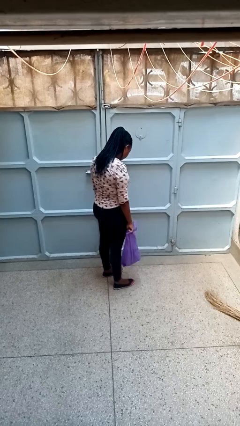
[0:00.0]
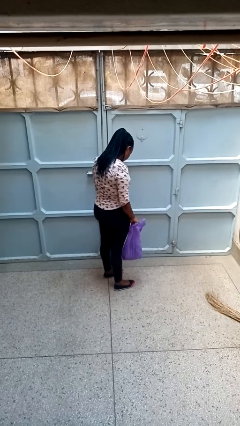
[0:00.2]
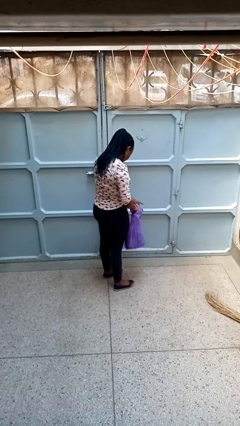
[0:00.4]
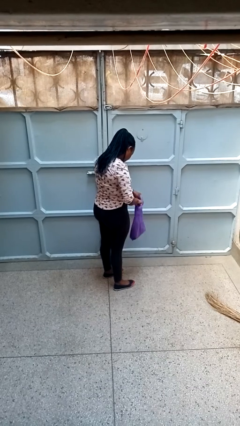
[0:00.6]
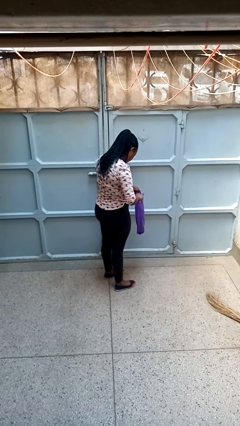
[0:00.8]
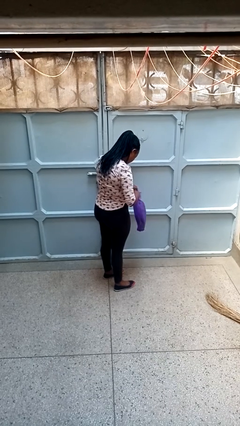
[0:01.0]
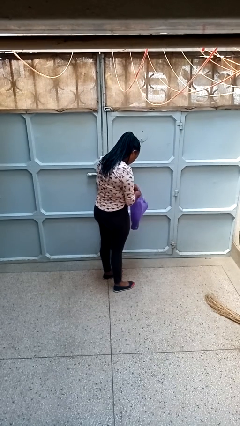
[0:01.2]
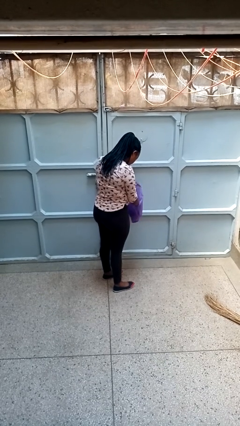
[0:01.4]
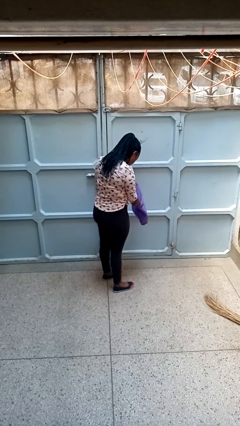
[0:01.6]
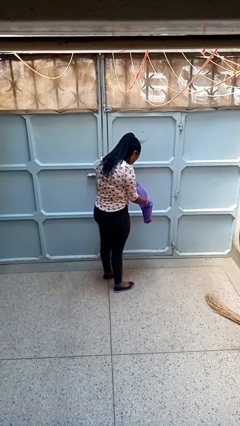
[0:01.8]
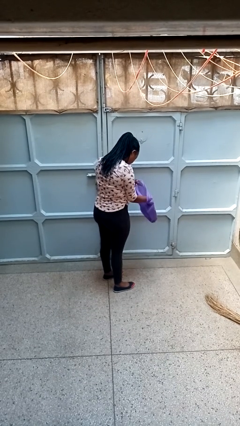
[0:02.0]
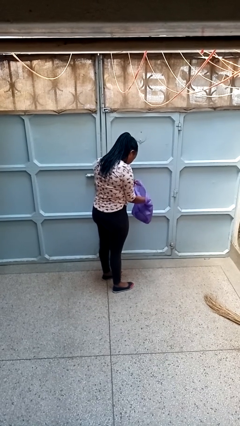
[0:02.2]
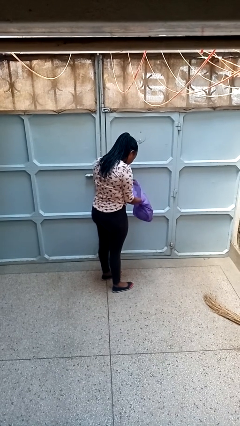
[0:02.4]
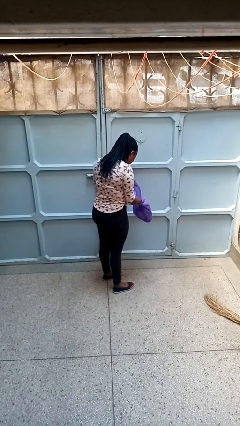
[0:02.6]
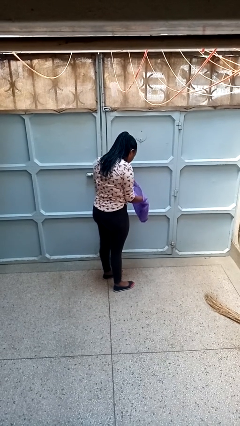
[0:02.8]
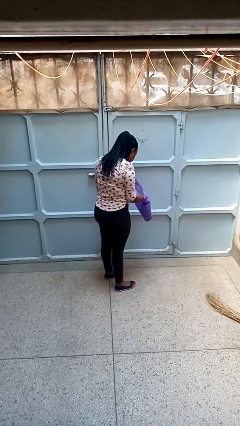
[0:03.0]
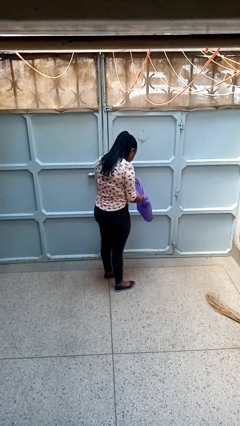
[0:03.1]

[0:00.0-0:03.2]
person searches in bag

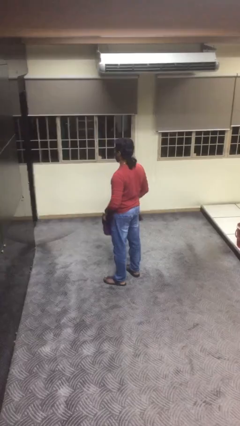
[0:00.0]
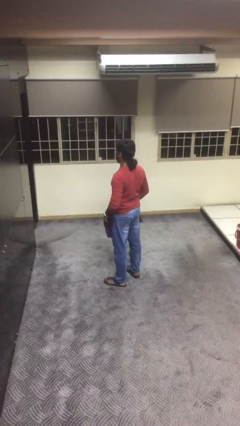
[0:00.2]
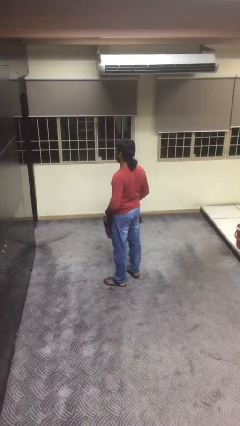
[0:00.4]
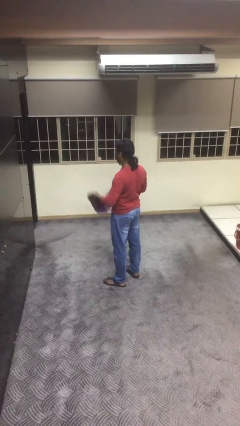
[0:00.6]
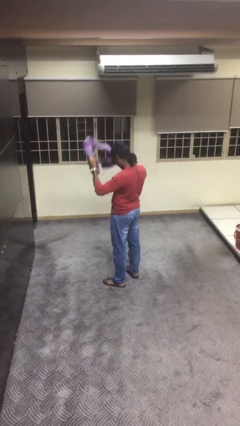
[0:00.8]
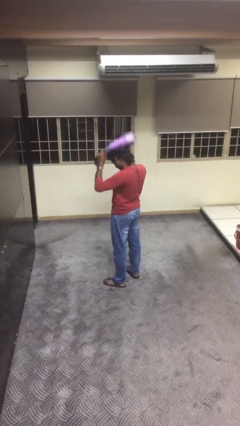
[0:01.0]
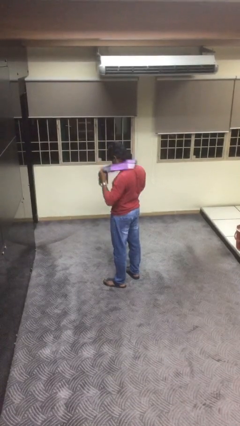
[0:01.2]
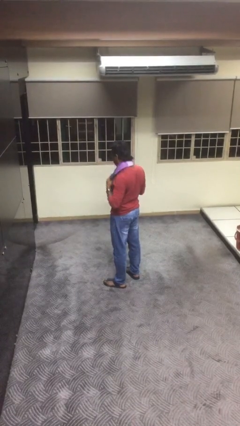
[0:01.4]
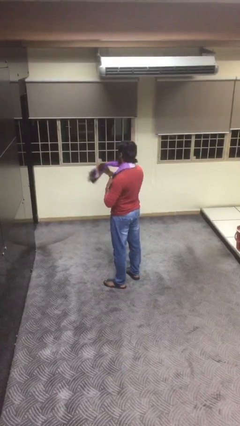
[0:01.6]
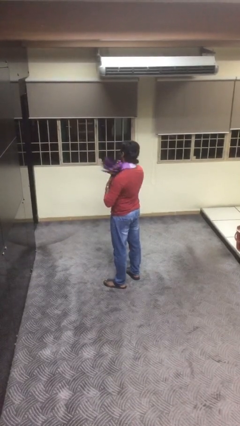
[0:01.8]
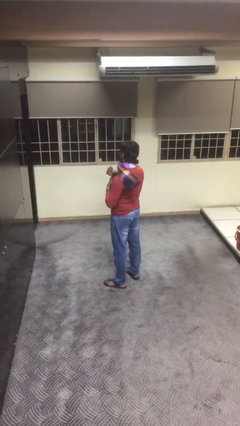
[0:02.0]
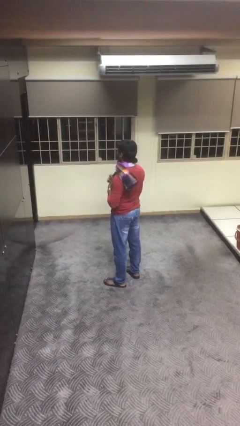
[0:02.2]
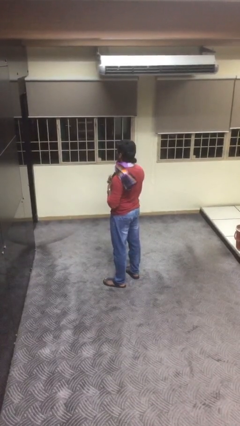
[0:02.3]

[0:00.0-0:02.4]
person puts on scarf

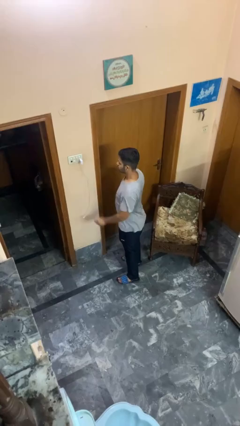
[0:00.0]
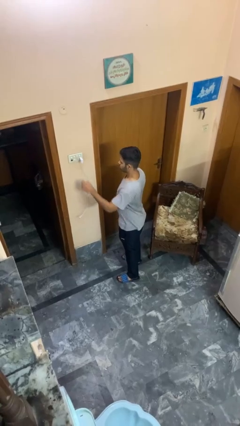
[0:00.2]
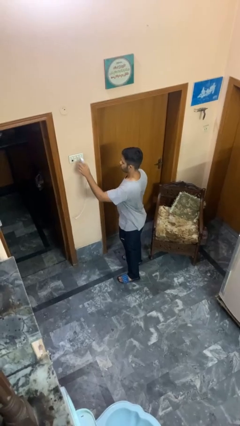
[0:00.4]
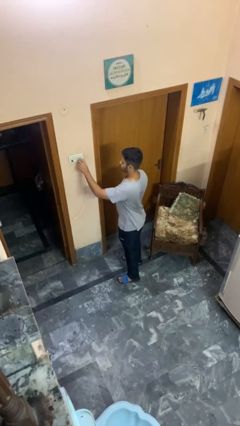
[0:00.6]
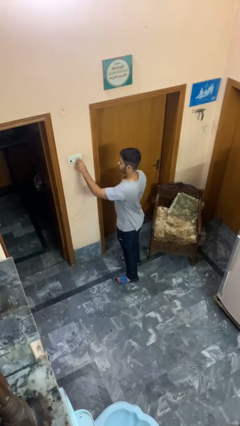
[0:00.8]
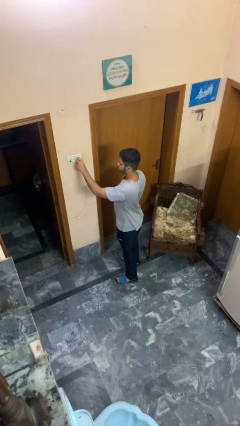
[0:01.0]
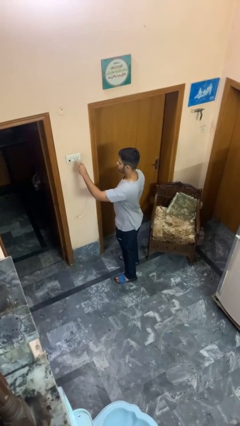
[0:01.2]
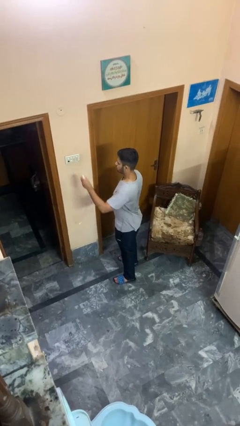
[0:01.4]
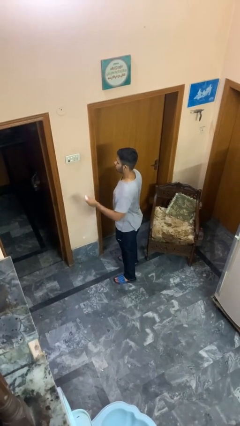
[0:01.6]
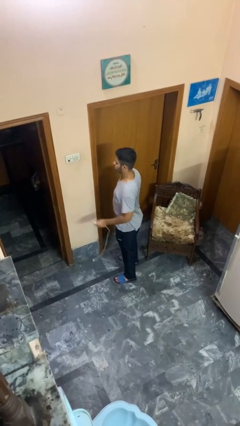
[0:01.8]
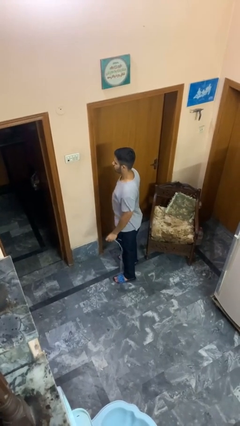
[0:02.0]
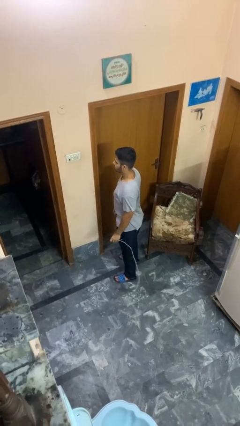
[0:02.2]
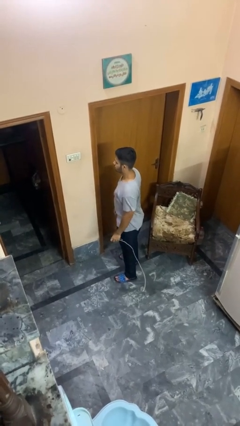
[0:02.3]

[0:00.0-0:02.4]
person unplugs from electrical socket

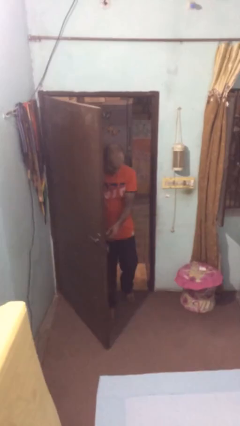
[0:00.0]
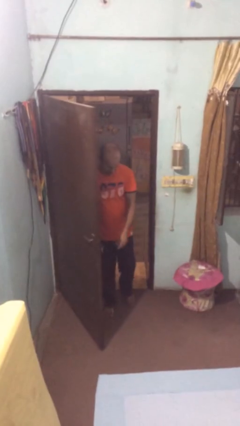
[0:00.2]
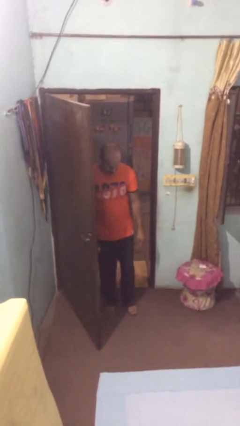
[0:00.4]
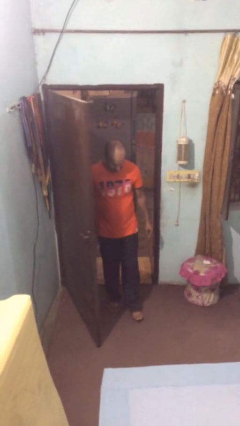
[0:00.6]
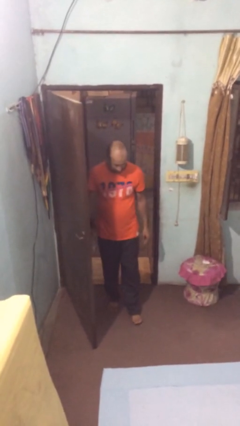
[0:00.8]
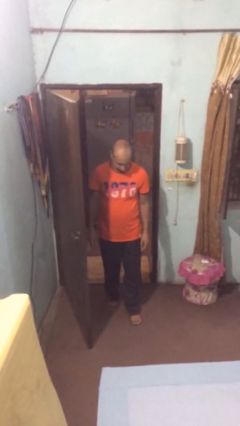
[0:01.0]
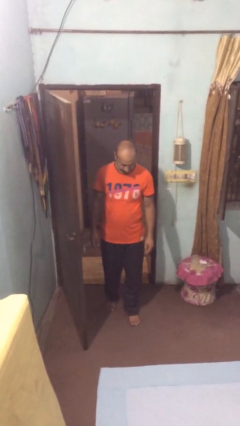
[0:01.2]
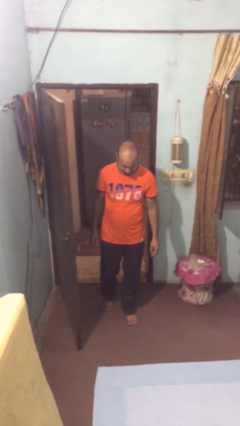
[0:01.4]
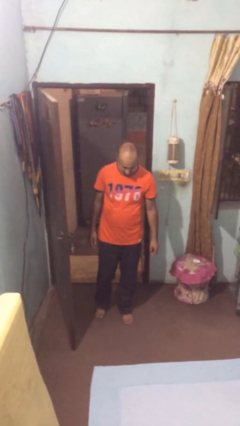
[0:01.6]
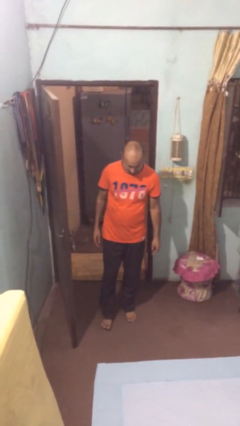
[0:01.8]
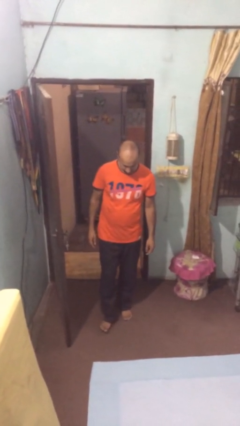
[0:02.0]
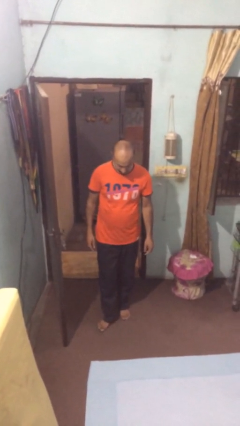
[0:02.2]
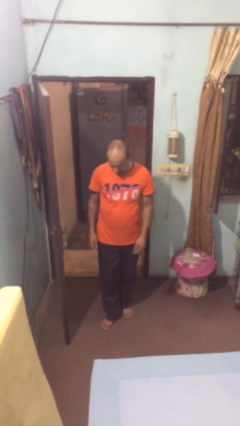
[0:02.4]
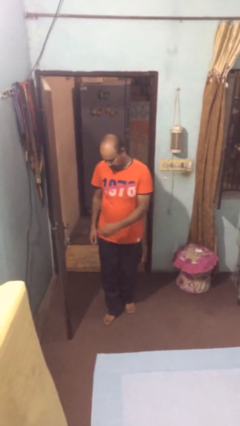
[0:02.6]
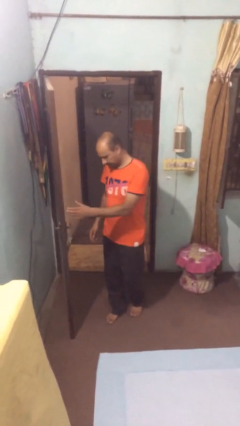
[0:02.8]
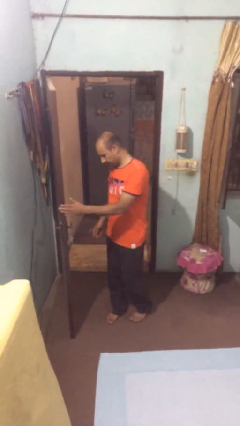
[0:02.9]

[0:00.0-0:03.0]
person enters scene through structure

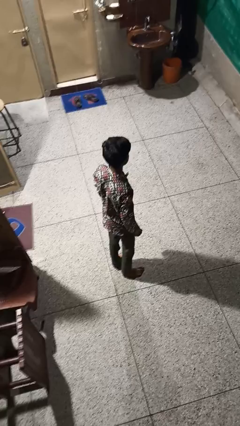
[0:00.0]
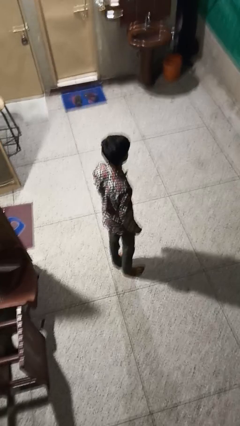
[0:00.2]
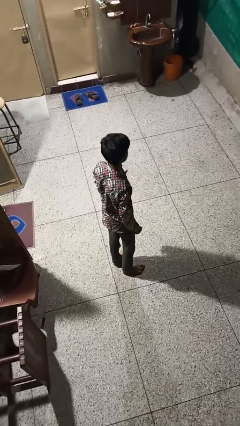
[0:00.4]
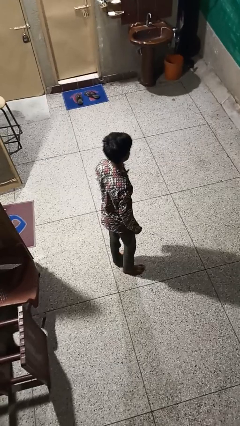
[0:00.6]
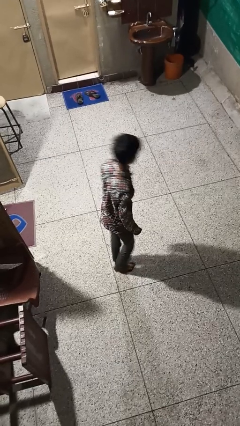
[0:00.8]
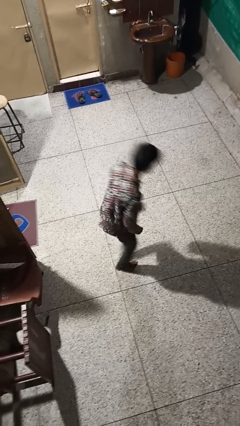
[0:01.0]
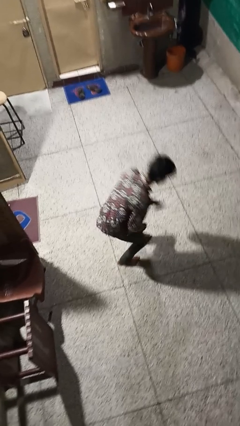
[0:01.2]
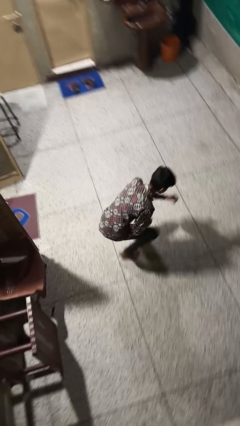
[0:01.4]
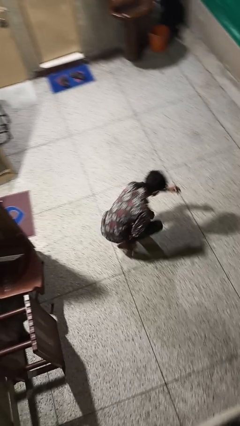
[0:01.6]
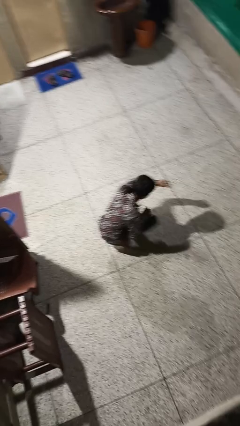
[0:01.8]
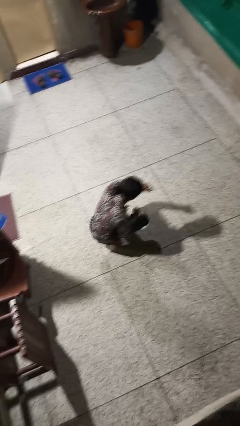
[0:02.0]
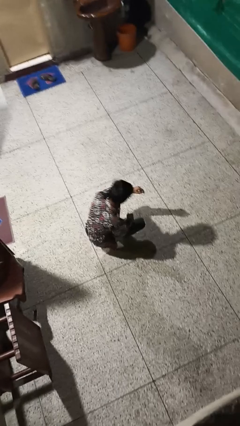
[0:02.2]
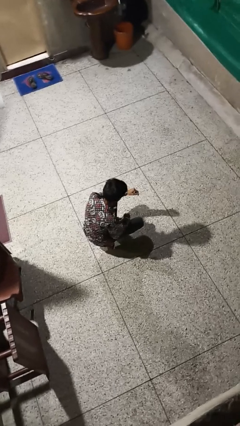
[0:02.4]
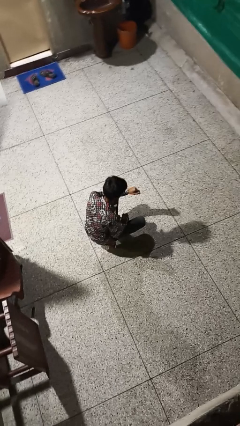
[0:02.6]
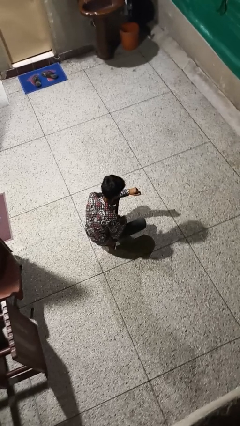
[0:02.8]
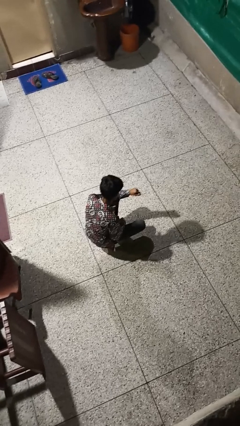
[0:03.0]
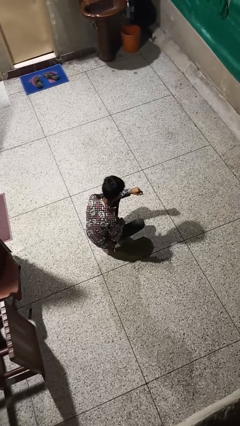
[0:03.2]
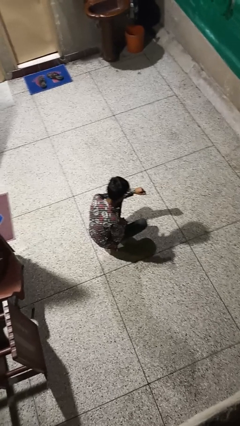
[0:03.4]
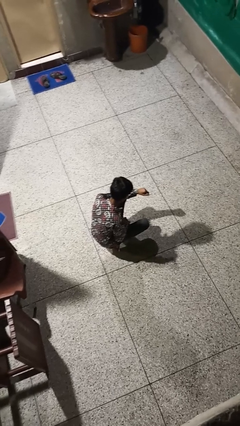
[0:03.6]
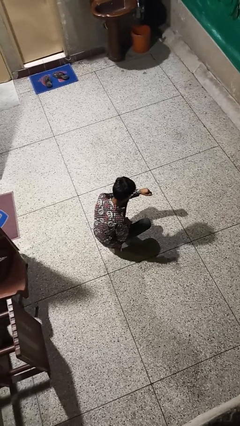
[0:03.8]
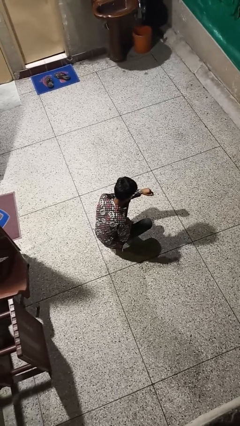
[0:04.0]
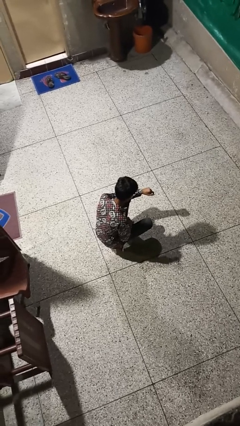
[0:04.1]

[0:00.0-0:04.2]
person kneels

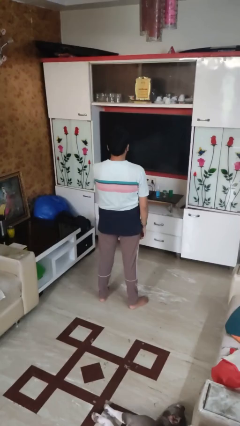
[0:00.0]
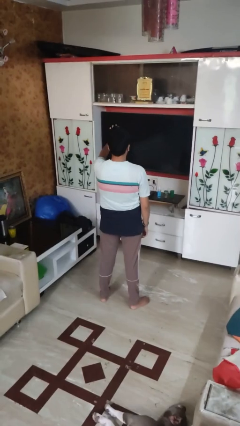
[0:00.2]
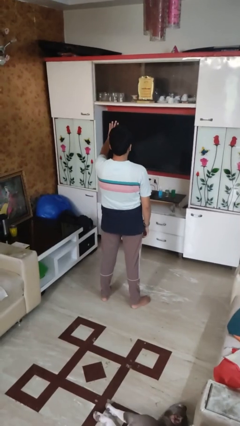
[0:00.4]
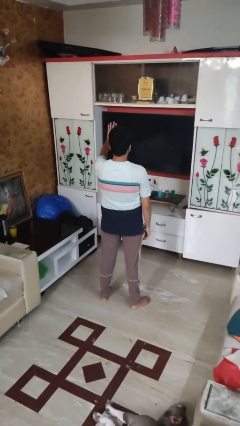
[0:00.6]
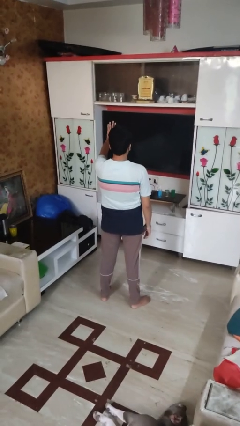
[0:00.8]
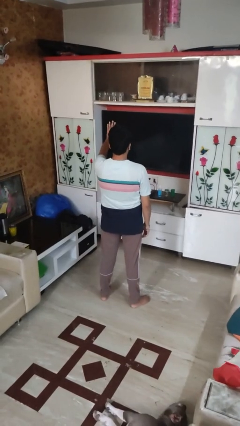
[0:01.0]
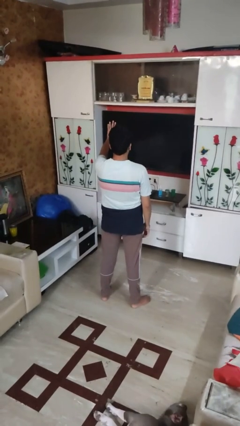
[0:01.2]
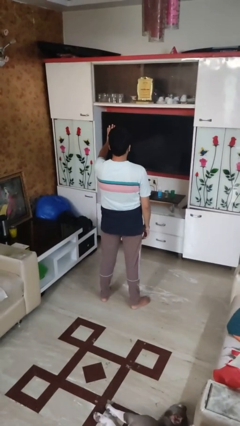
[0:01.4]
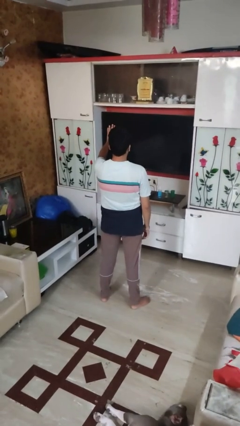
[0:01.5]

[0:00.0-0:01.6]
person gestures stop

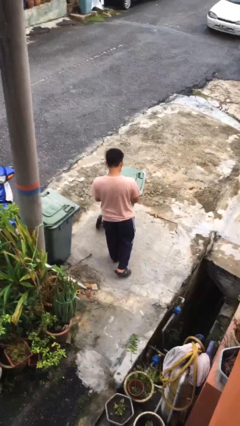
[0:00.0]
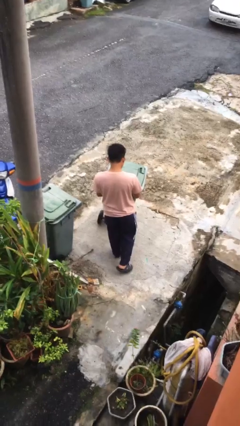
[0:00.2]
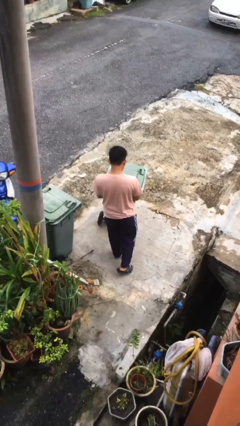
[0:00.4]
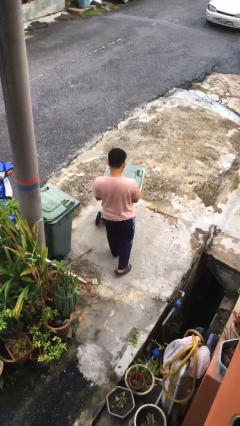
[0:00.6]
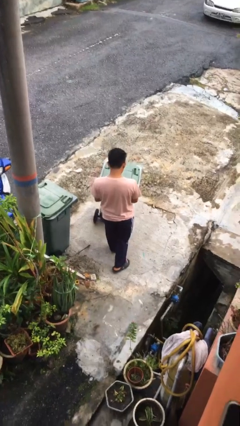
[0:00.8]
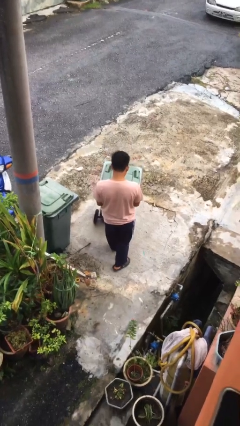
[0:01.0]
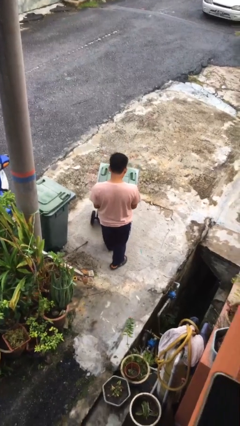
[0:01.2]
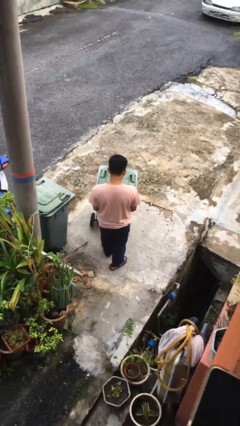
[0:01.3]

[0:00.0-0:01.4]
person pulls wheeled trashcan
